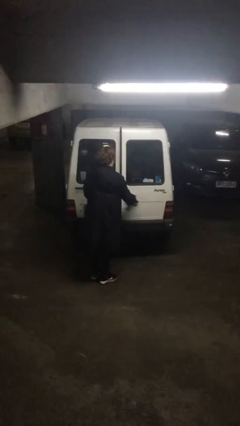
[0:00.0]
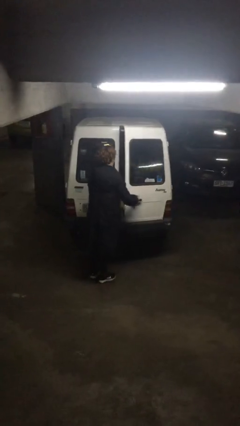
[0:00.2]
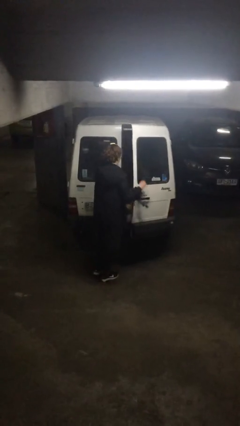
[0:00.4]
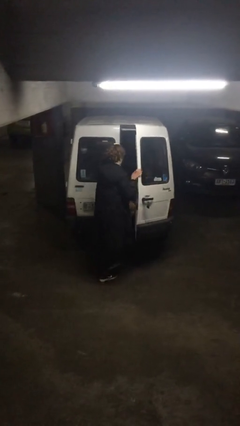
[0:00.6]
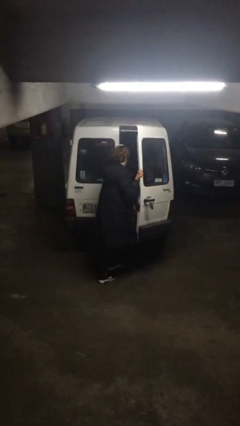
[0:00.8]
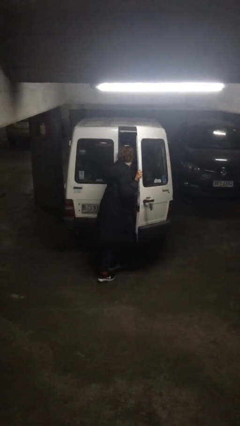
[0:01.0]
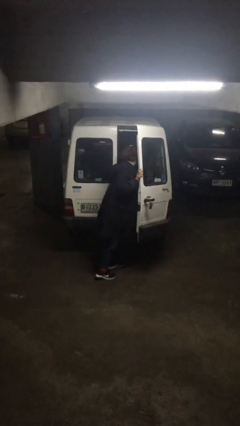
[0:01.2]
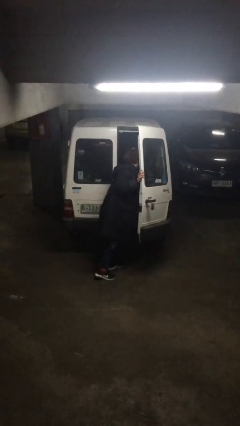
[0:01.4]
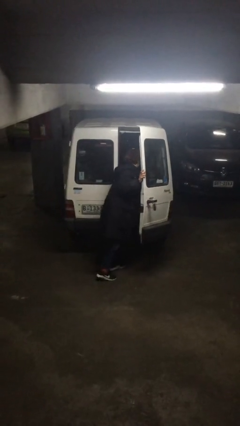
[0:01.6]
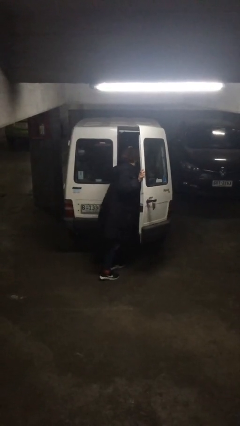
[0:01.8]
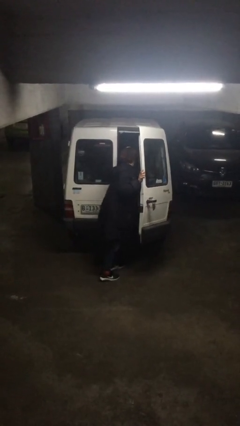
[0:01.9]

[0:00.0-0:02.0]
person opens car door

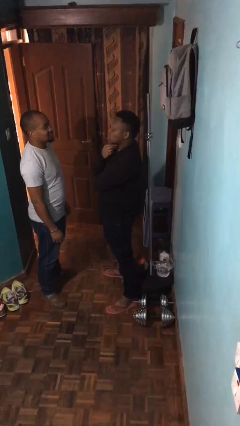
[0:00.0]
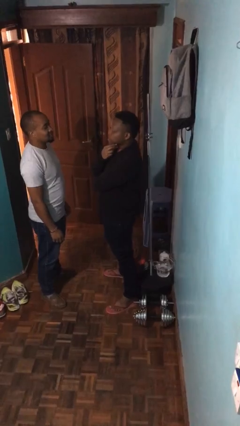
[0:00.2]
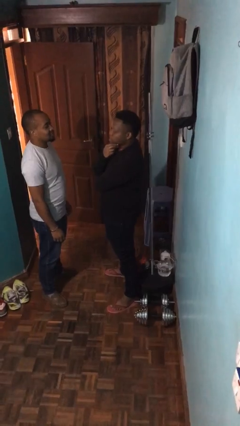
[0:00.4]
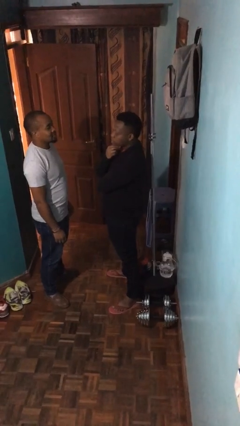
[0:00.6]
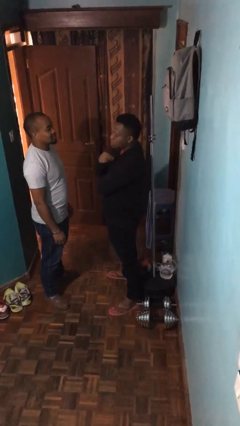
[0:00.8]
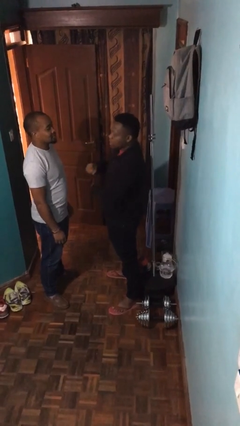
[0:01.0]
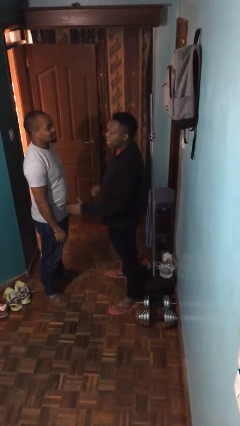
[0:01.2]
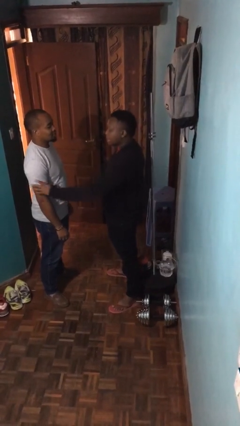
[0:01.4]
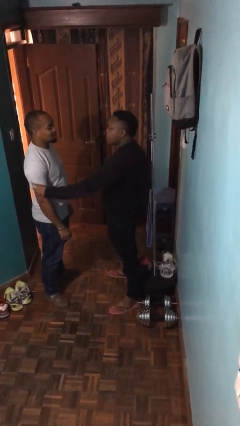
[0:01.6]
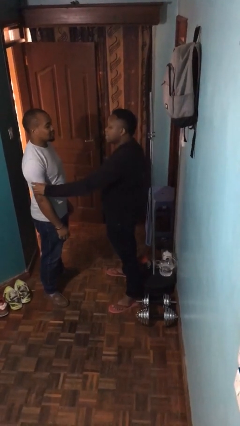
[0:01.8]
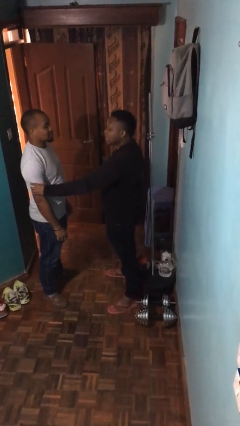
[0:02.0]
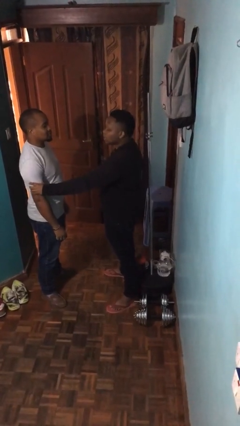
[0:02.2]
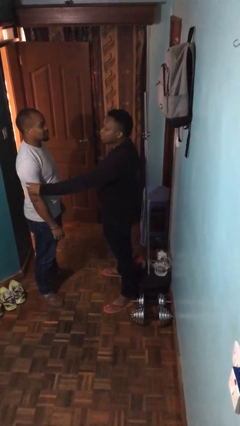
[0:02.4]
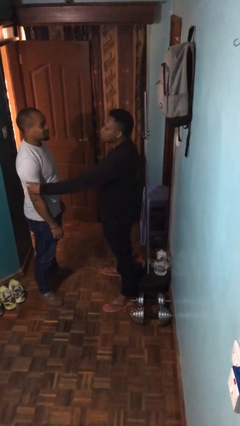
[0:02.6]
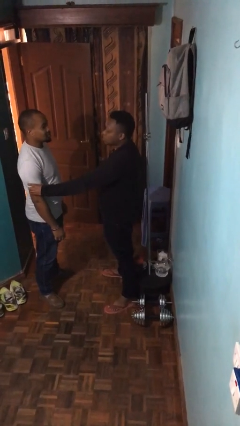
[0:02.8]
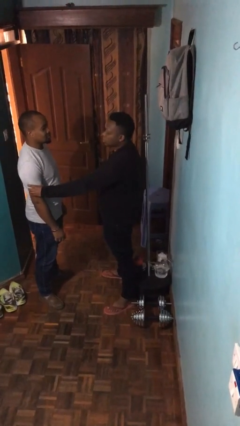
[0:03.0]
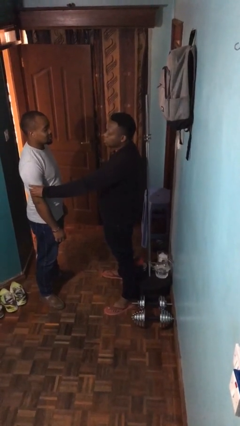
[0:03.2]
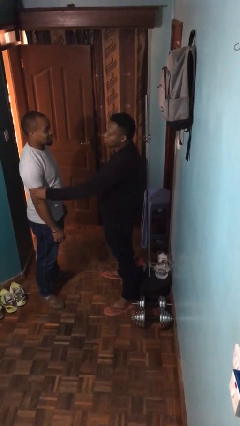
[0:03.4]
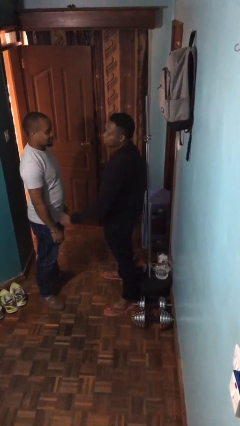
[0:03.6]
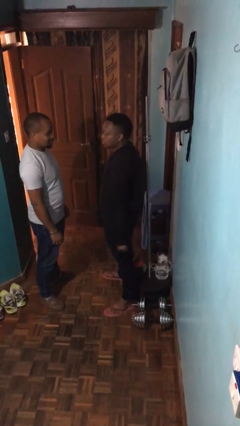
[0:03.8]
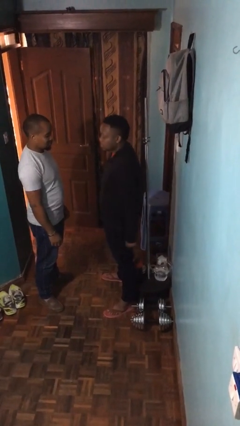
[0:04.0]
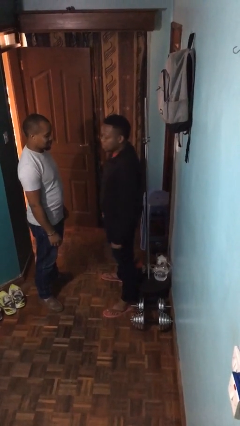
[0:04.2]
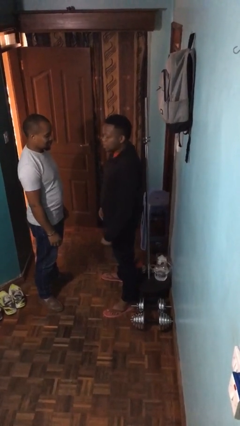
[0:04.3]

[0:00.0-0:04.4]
person grabs person by bicep

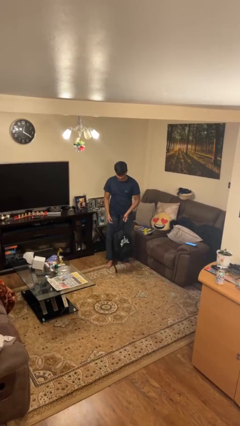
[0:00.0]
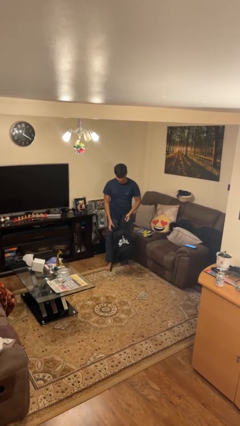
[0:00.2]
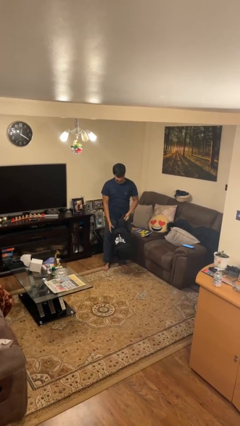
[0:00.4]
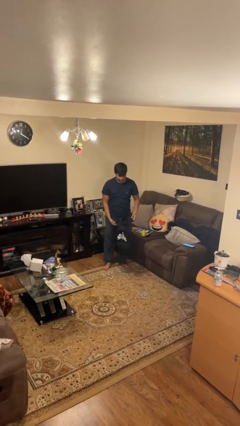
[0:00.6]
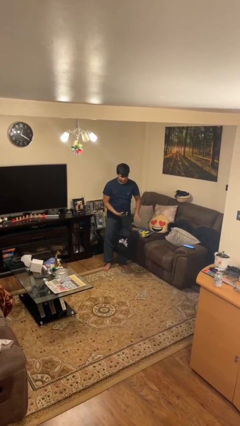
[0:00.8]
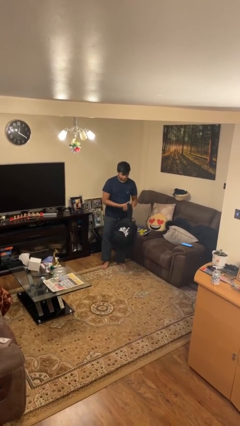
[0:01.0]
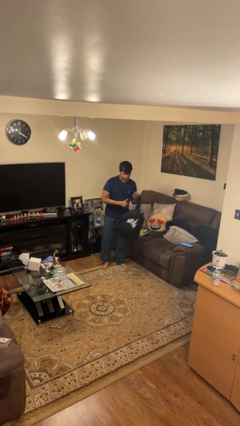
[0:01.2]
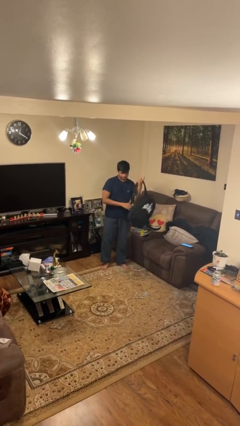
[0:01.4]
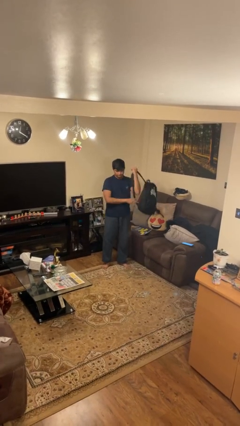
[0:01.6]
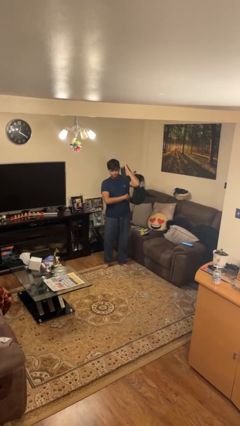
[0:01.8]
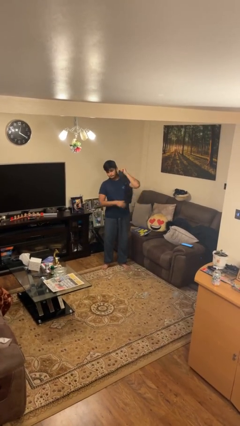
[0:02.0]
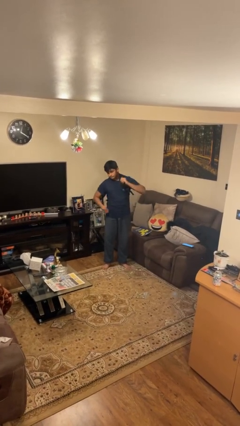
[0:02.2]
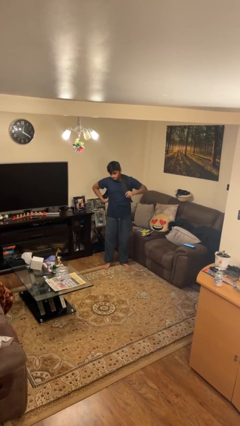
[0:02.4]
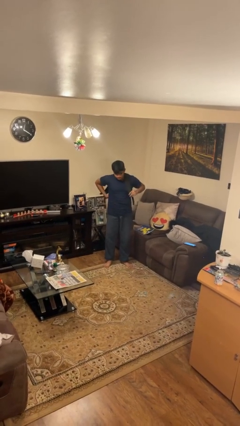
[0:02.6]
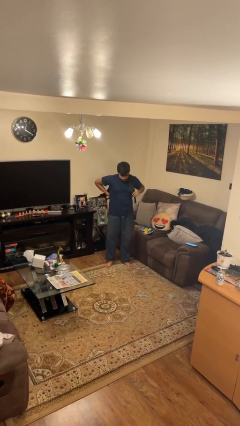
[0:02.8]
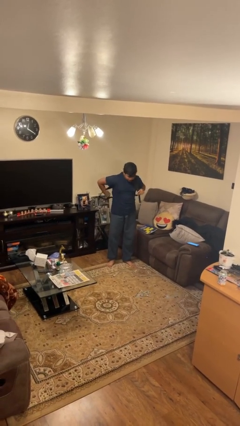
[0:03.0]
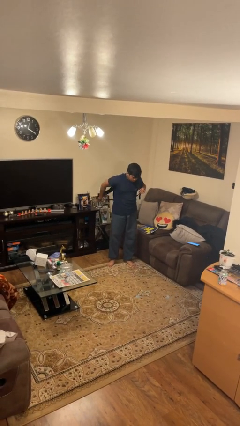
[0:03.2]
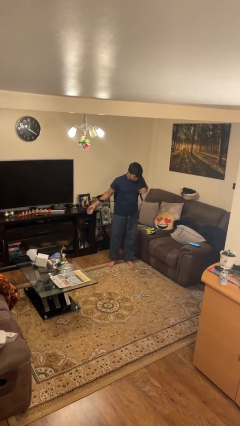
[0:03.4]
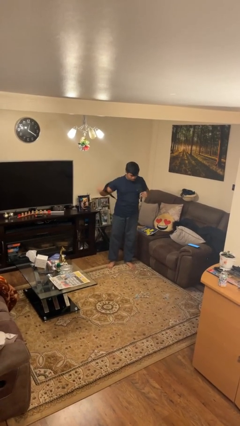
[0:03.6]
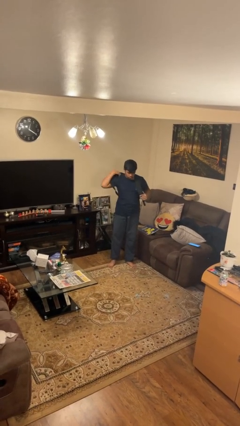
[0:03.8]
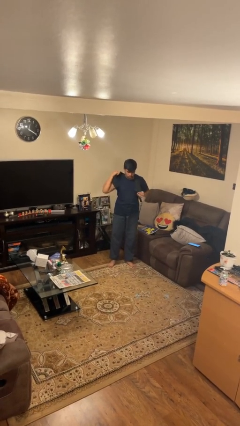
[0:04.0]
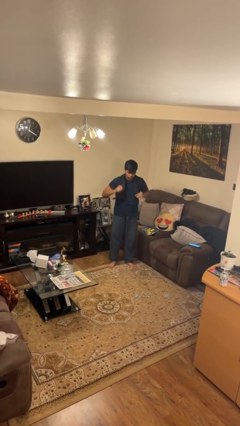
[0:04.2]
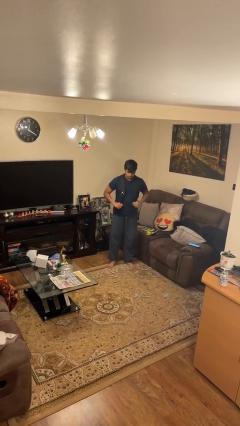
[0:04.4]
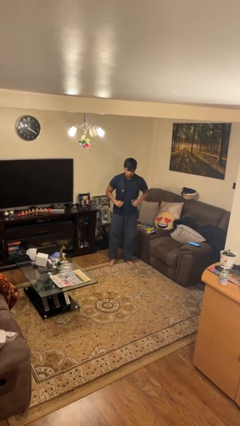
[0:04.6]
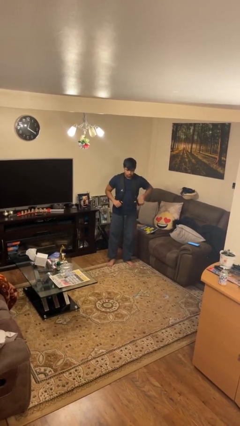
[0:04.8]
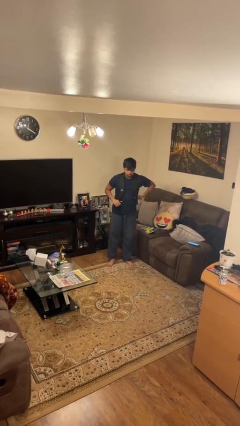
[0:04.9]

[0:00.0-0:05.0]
person puts on backpack

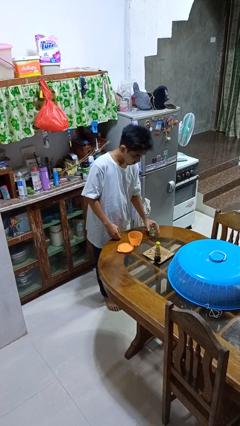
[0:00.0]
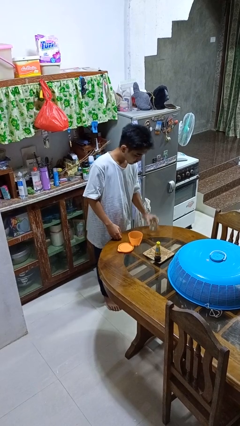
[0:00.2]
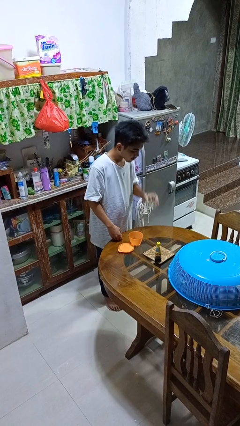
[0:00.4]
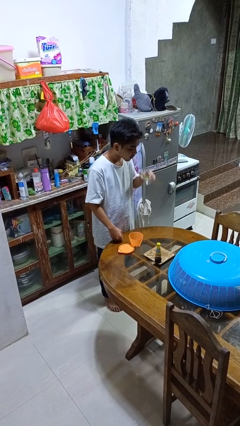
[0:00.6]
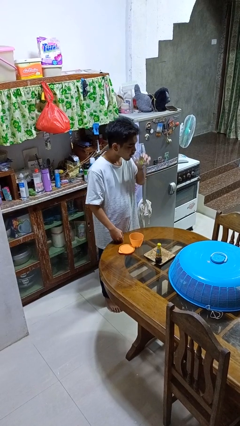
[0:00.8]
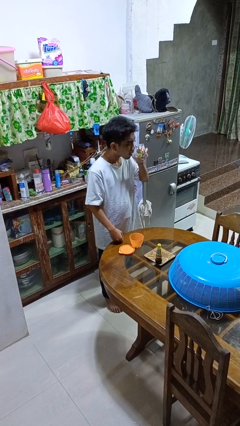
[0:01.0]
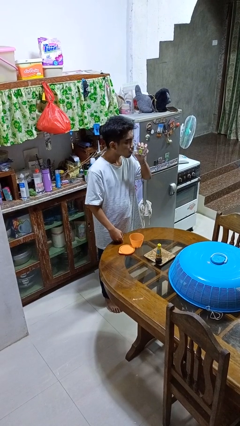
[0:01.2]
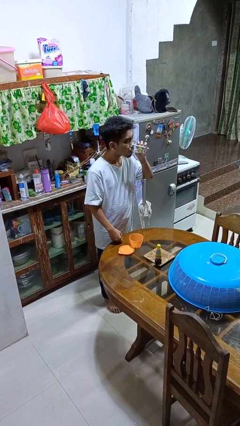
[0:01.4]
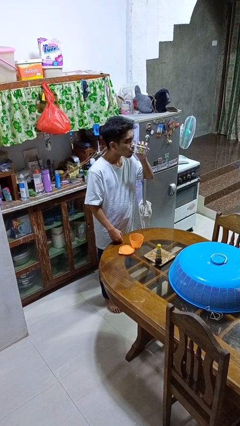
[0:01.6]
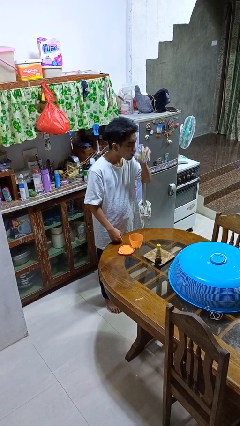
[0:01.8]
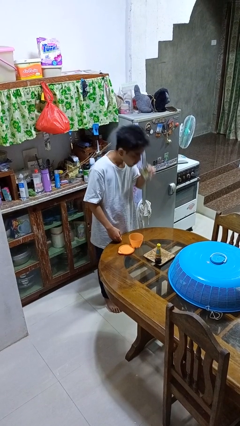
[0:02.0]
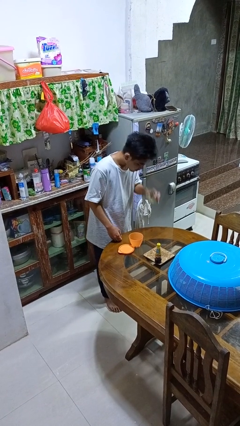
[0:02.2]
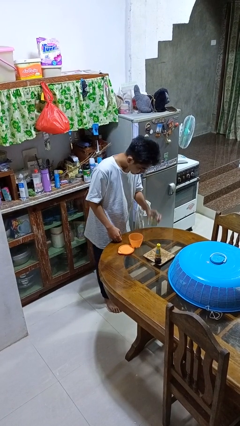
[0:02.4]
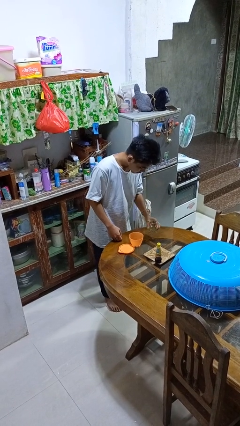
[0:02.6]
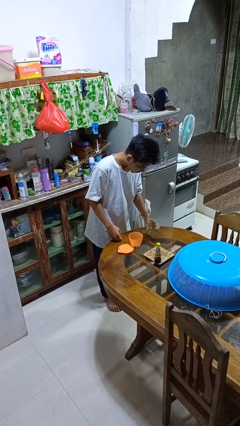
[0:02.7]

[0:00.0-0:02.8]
person drinks from cup

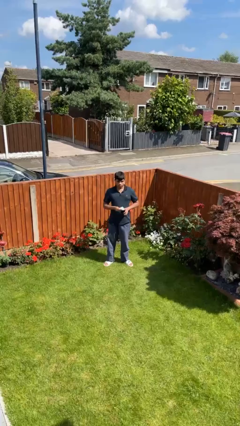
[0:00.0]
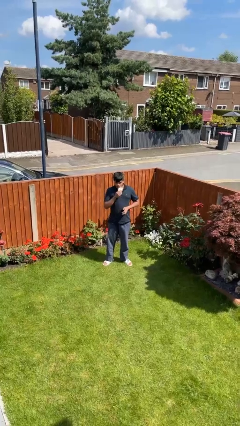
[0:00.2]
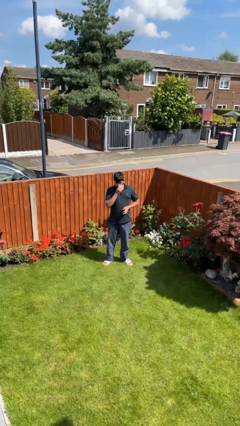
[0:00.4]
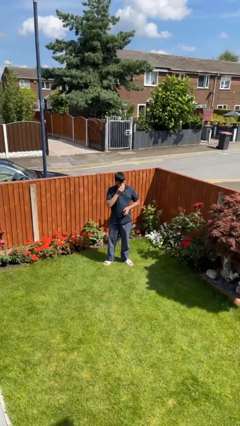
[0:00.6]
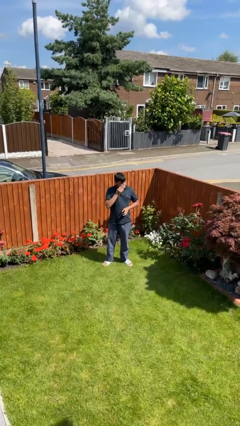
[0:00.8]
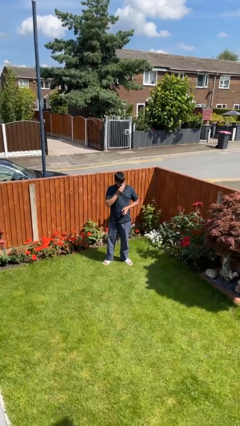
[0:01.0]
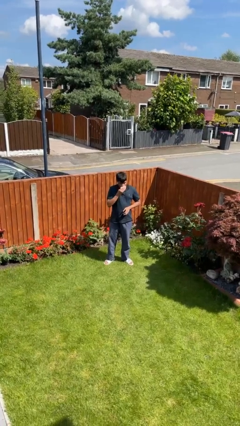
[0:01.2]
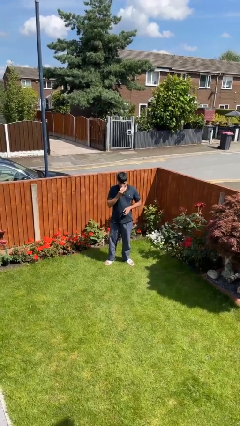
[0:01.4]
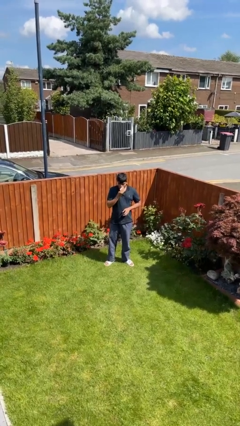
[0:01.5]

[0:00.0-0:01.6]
person wipes mouth with napkin

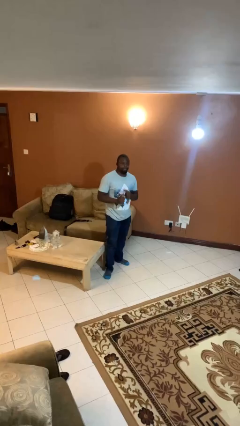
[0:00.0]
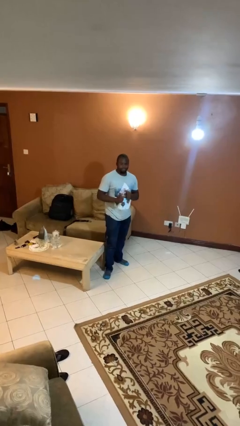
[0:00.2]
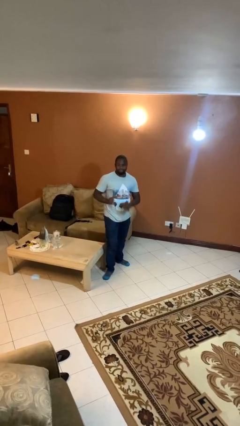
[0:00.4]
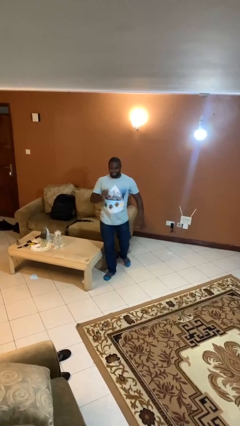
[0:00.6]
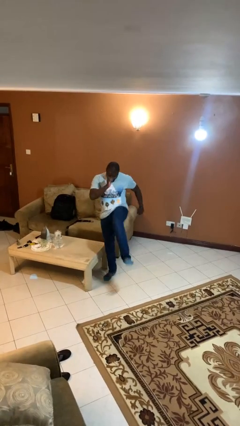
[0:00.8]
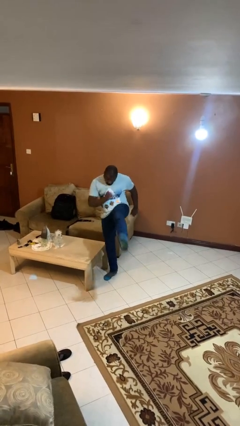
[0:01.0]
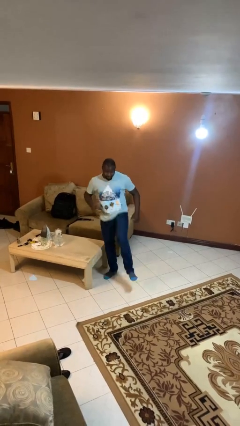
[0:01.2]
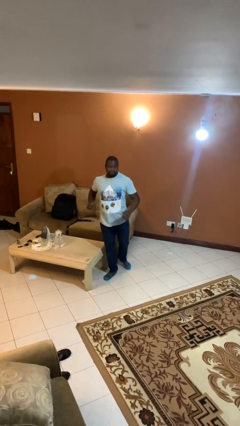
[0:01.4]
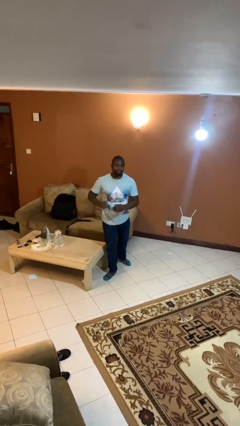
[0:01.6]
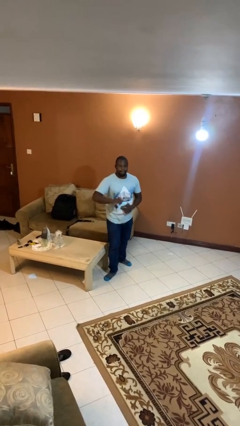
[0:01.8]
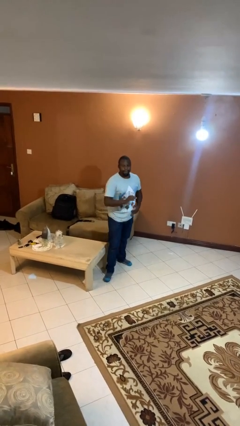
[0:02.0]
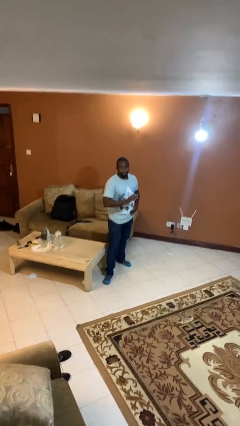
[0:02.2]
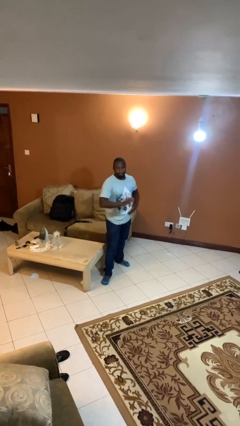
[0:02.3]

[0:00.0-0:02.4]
person karate kicks
